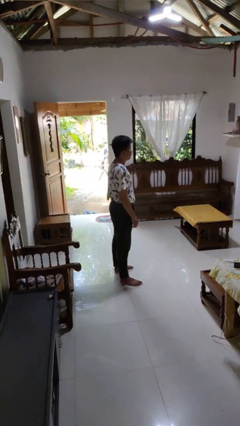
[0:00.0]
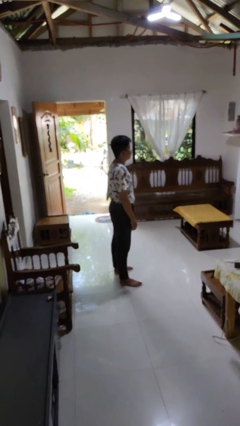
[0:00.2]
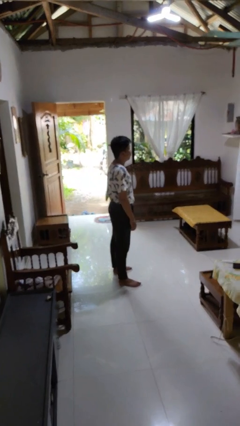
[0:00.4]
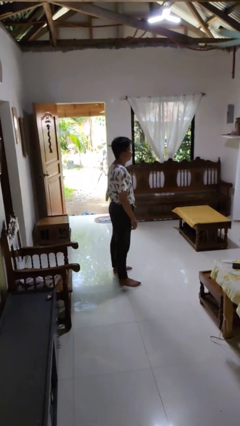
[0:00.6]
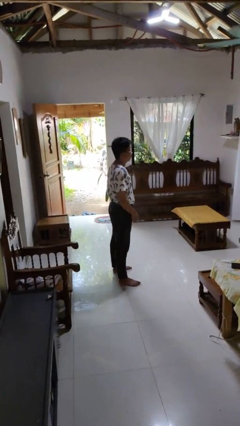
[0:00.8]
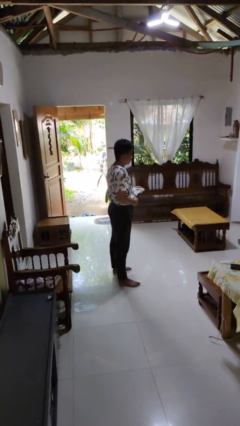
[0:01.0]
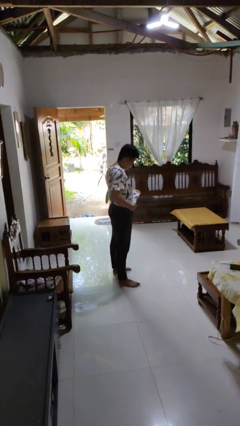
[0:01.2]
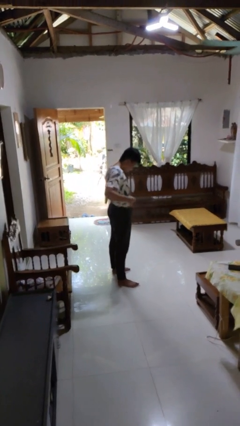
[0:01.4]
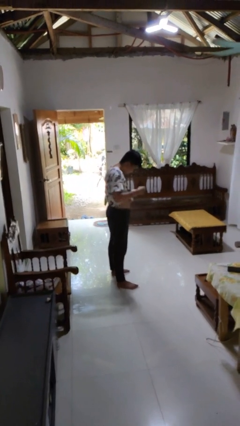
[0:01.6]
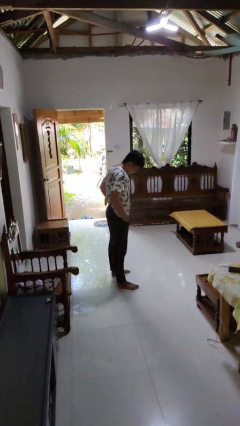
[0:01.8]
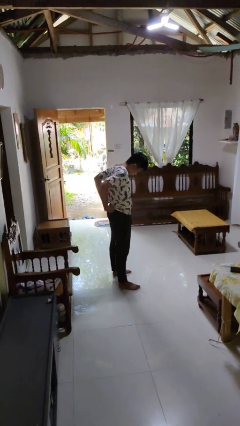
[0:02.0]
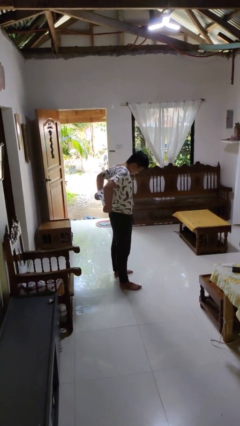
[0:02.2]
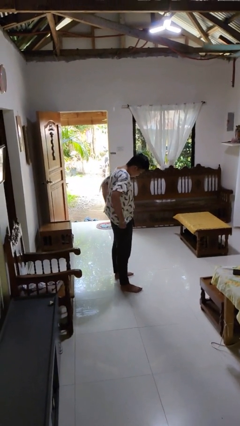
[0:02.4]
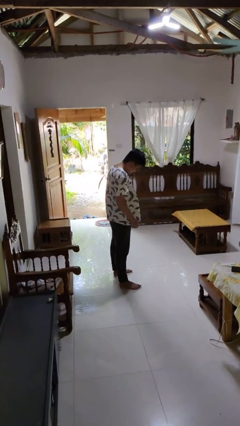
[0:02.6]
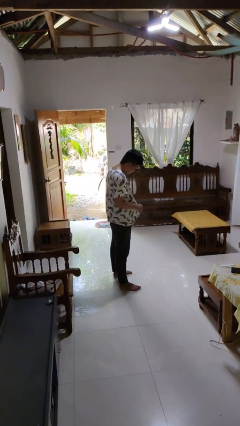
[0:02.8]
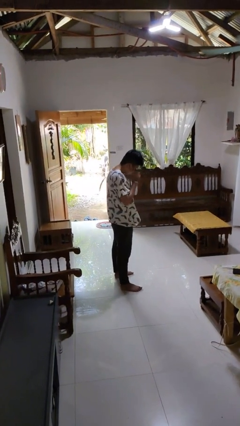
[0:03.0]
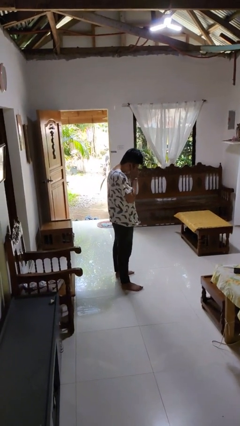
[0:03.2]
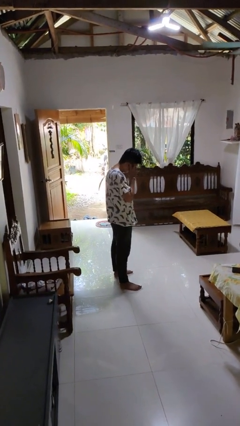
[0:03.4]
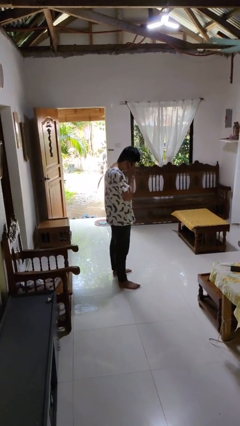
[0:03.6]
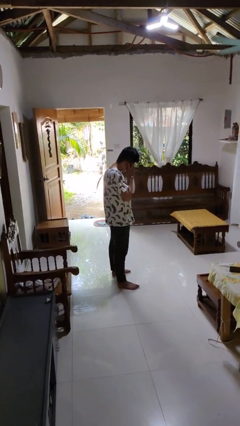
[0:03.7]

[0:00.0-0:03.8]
person untucks shirt

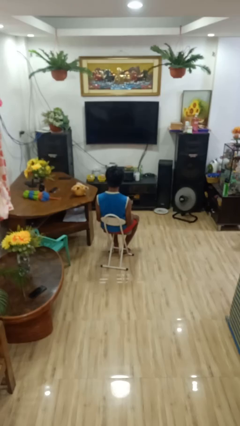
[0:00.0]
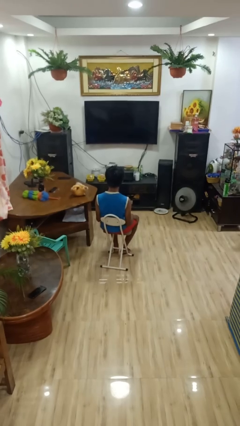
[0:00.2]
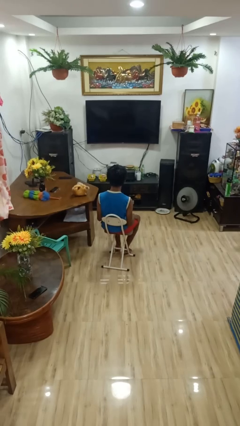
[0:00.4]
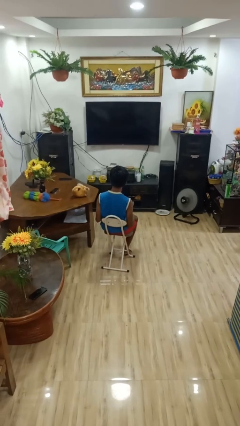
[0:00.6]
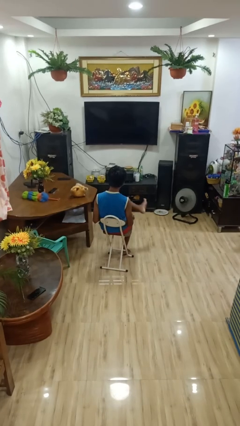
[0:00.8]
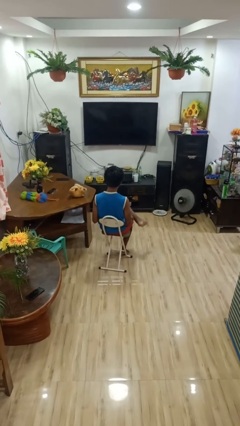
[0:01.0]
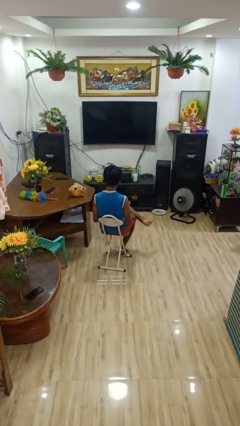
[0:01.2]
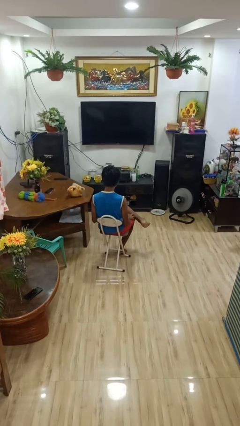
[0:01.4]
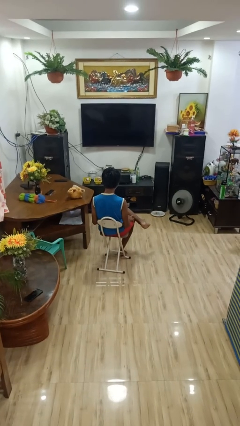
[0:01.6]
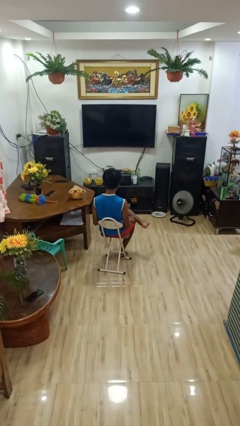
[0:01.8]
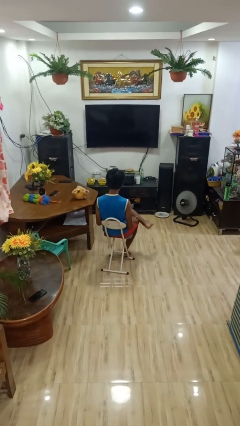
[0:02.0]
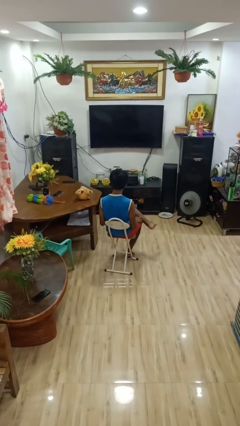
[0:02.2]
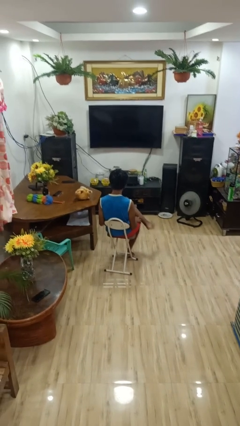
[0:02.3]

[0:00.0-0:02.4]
person crosses legs

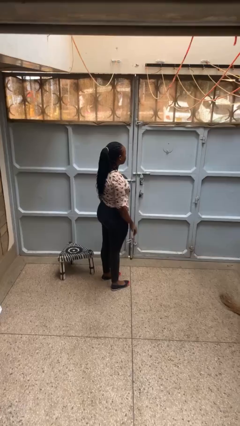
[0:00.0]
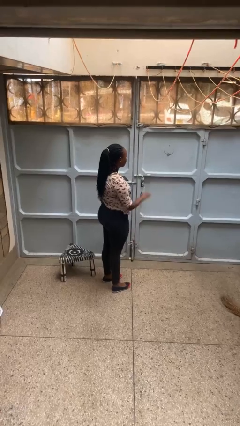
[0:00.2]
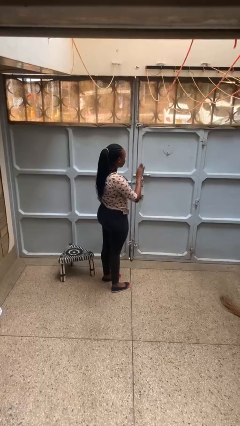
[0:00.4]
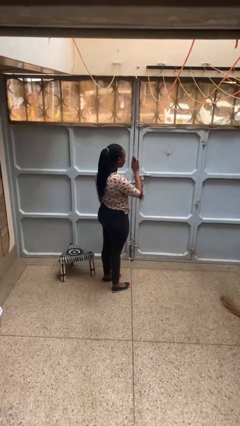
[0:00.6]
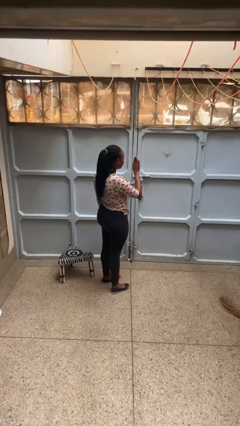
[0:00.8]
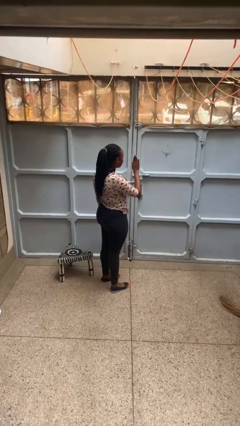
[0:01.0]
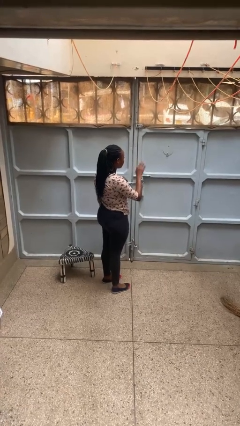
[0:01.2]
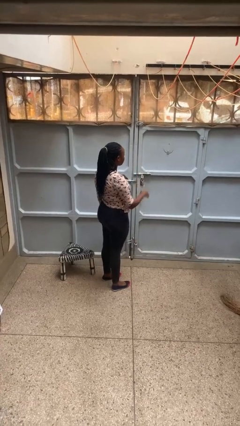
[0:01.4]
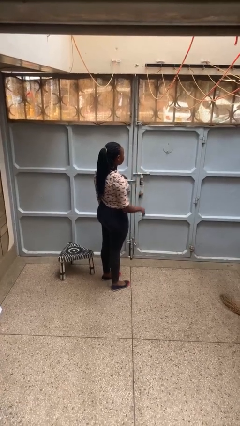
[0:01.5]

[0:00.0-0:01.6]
person gestures stop

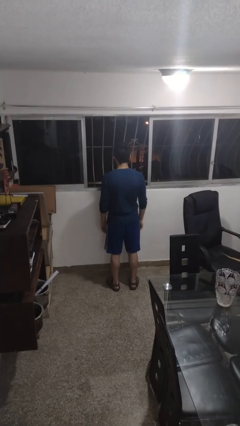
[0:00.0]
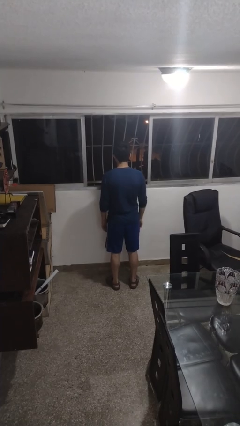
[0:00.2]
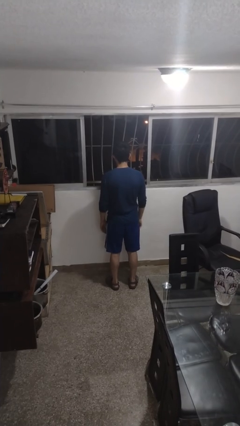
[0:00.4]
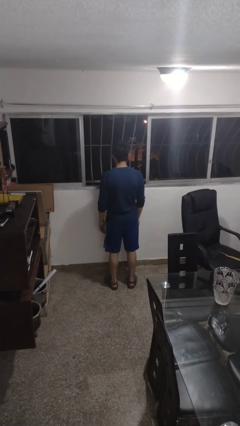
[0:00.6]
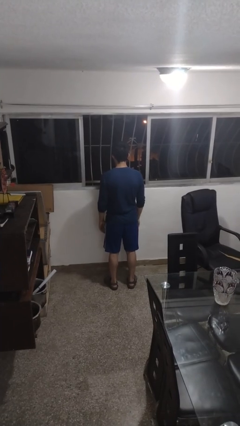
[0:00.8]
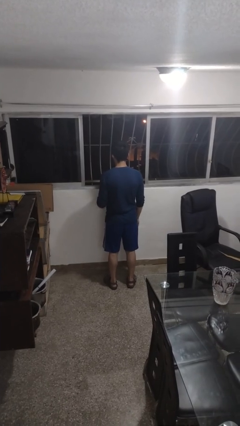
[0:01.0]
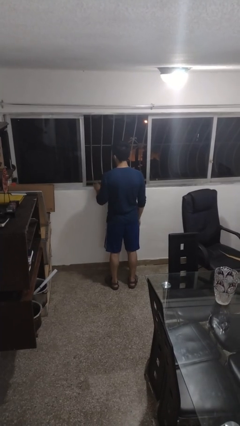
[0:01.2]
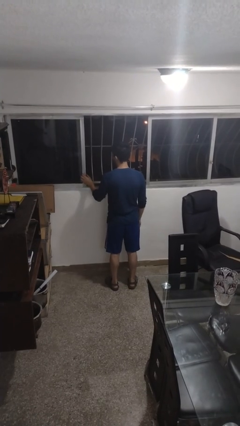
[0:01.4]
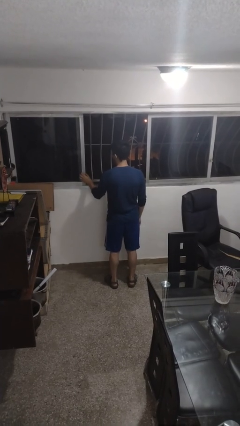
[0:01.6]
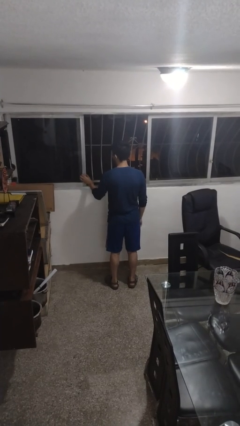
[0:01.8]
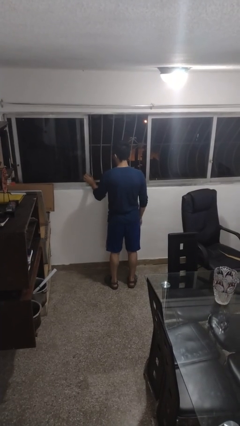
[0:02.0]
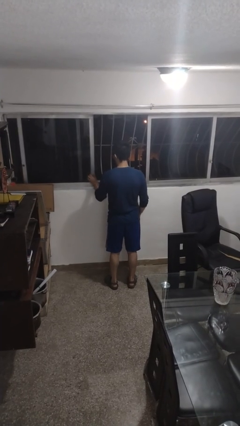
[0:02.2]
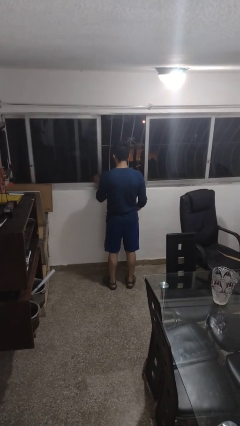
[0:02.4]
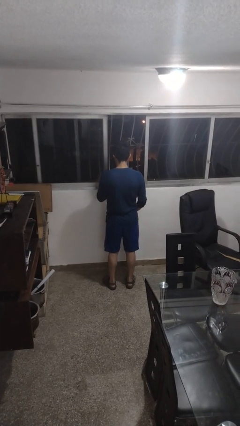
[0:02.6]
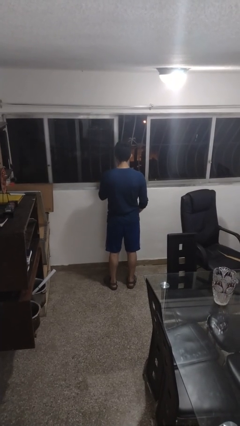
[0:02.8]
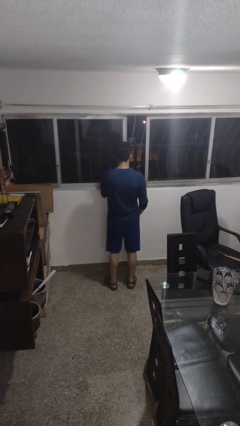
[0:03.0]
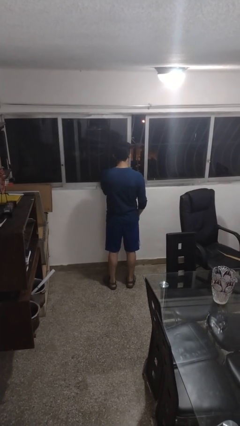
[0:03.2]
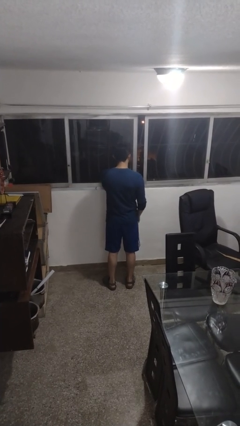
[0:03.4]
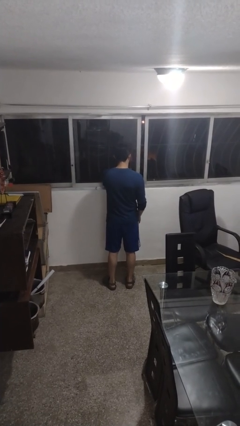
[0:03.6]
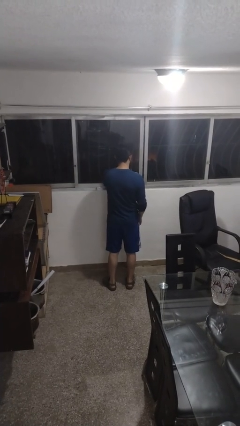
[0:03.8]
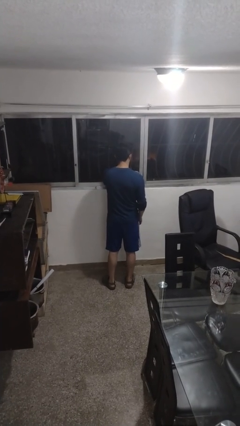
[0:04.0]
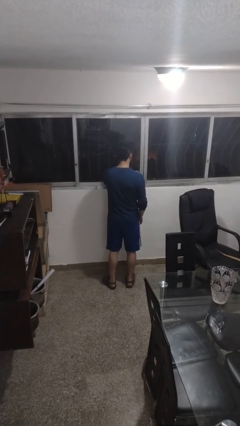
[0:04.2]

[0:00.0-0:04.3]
person closes home window

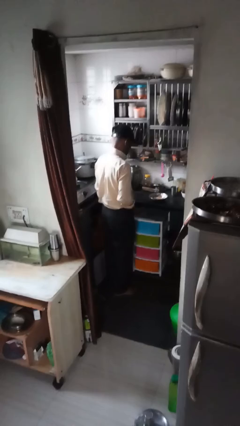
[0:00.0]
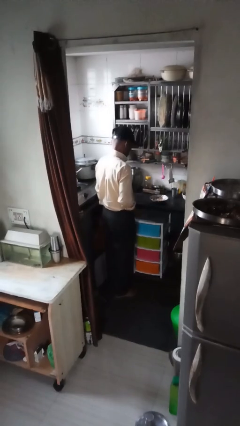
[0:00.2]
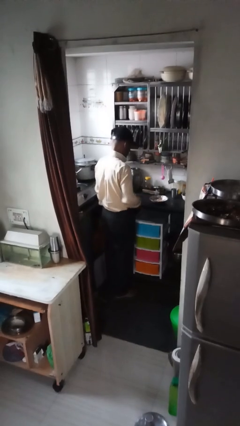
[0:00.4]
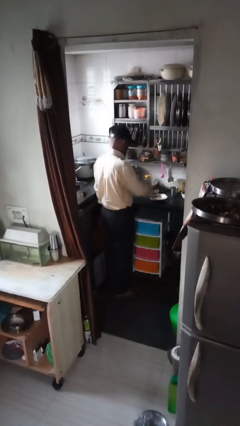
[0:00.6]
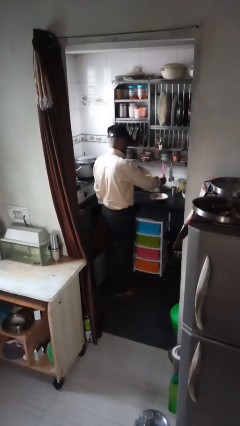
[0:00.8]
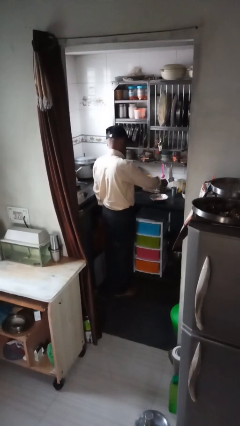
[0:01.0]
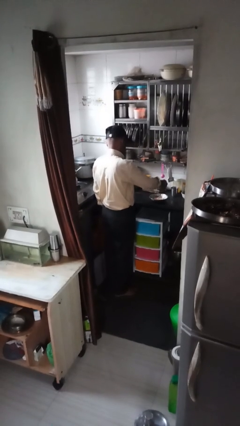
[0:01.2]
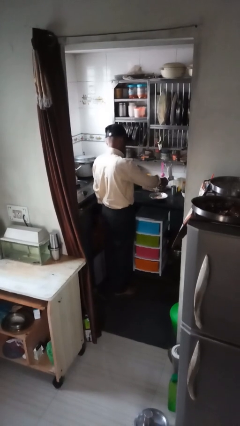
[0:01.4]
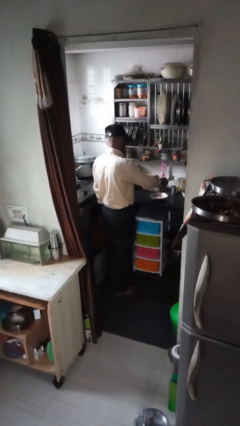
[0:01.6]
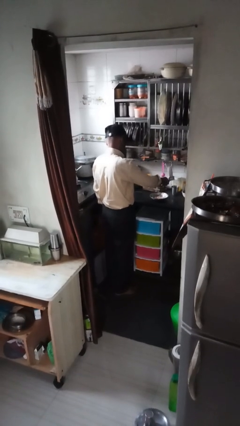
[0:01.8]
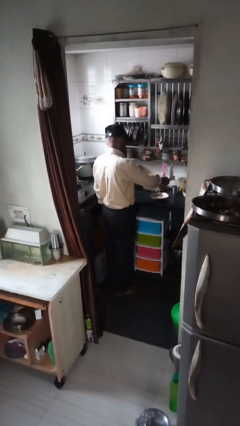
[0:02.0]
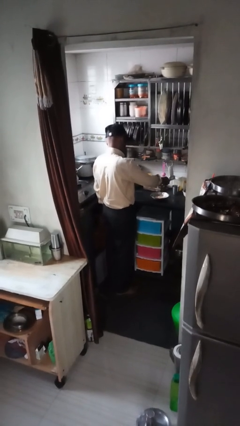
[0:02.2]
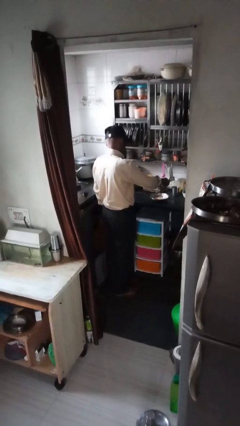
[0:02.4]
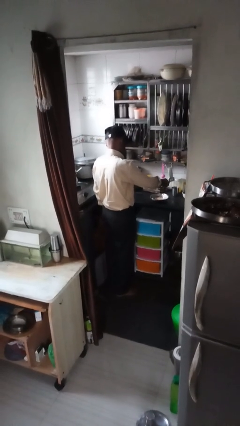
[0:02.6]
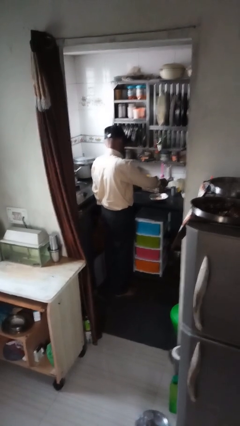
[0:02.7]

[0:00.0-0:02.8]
person pours into bowl

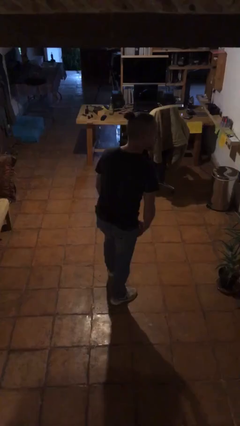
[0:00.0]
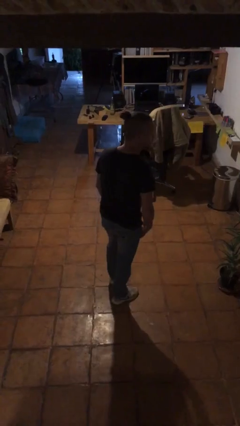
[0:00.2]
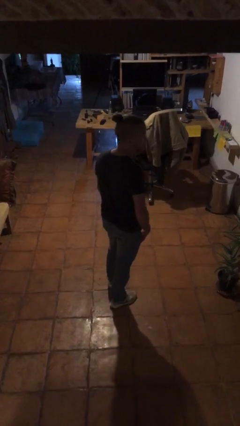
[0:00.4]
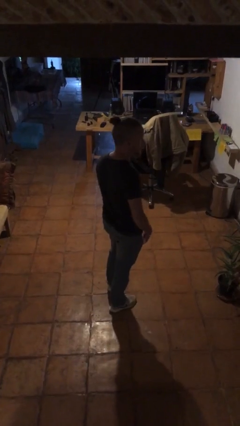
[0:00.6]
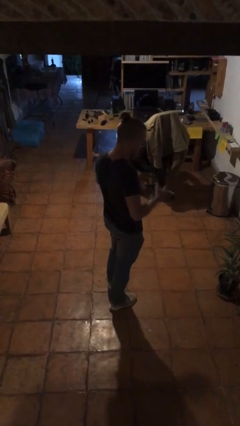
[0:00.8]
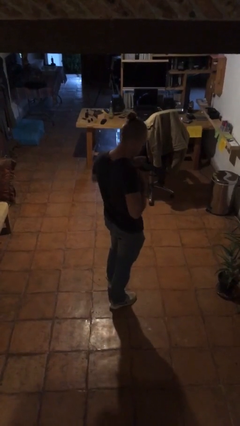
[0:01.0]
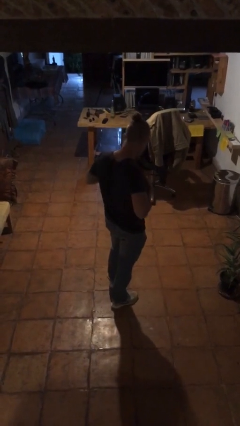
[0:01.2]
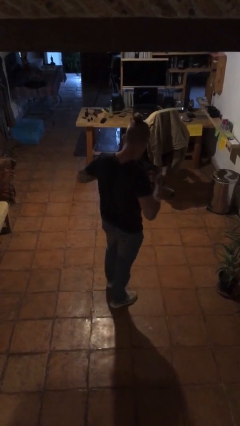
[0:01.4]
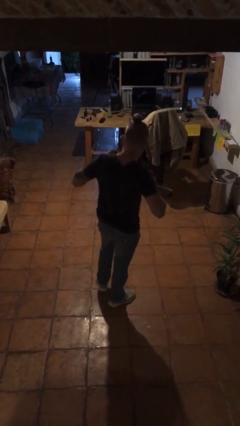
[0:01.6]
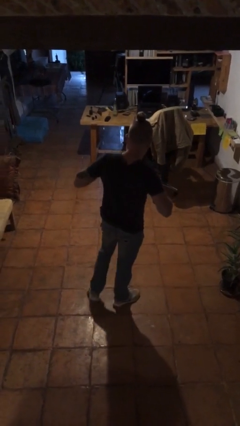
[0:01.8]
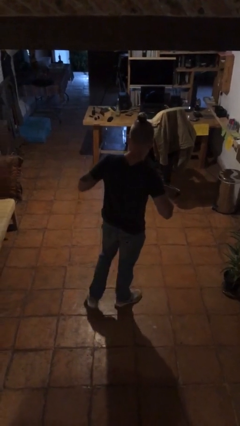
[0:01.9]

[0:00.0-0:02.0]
person drums on chest

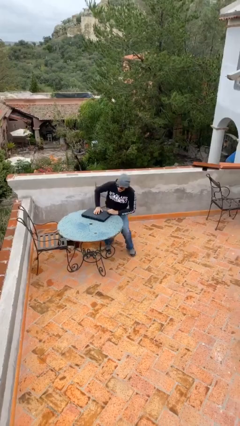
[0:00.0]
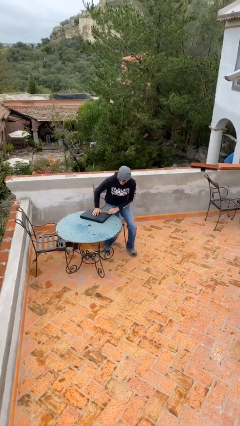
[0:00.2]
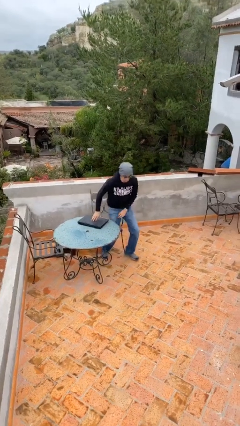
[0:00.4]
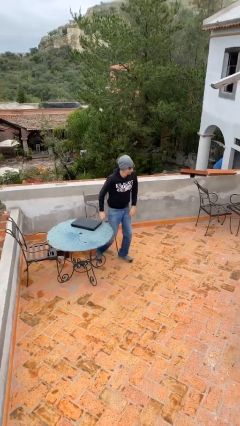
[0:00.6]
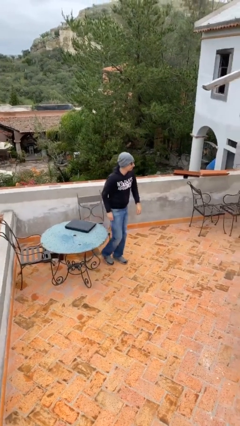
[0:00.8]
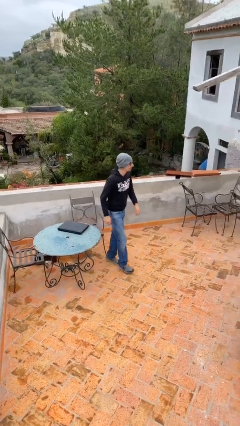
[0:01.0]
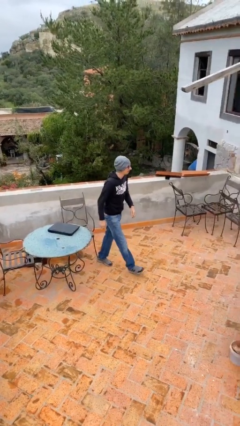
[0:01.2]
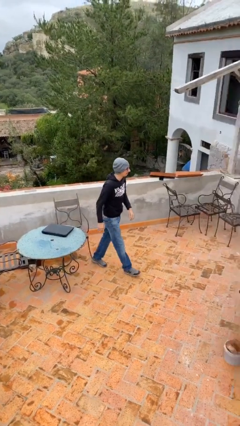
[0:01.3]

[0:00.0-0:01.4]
person stands up
